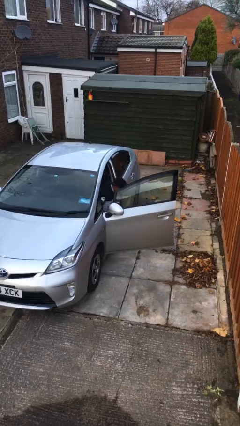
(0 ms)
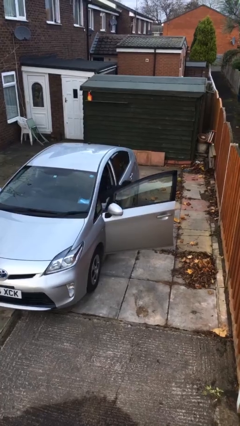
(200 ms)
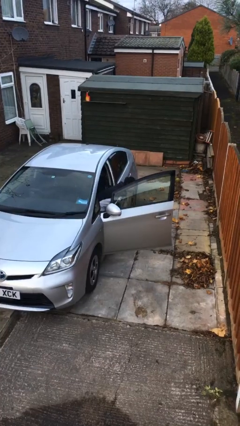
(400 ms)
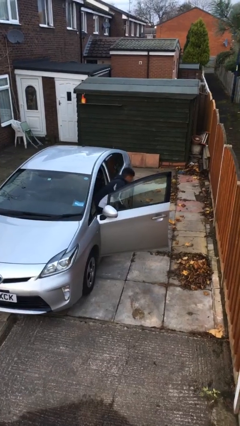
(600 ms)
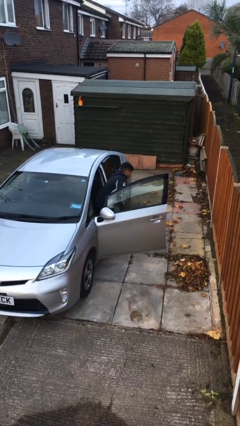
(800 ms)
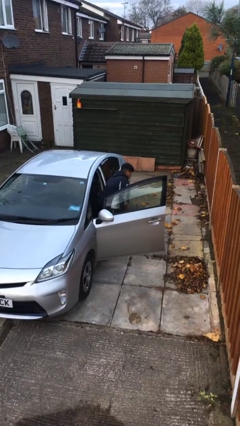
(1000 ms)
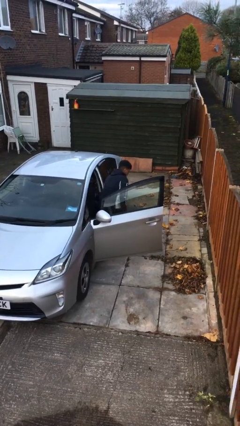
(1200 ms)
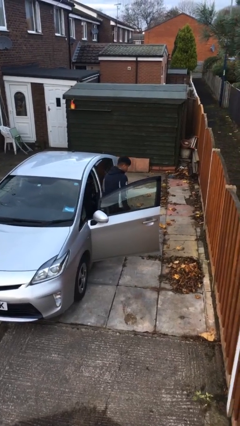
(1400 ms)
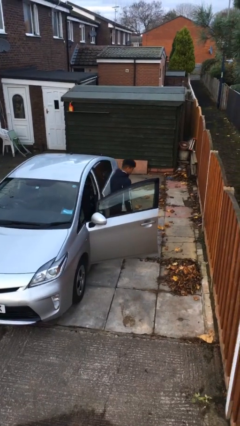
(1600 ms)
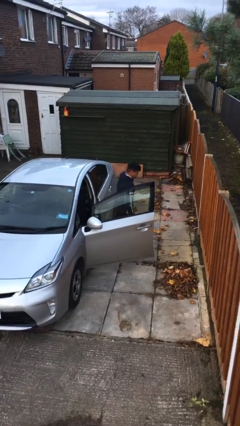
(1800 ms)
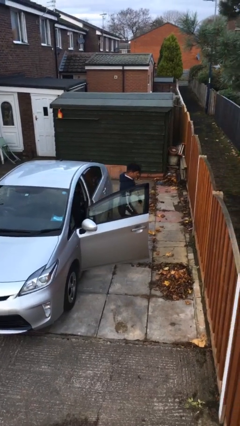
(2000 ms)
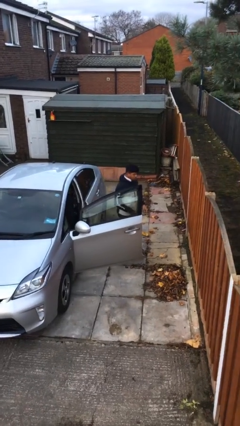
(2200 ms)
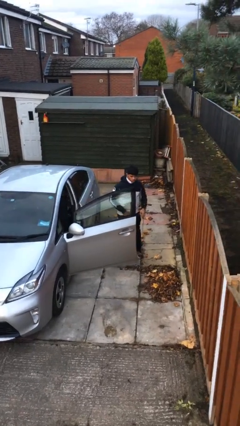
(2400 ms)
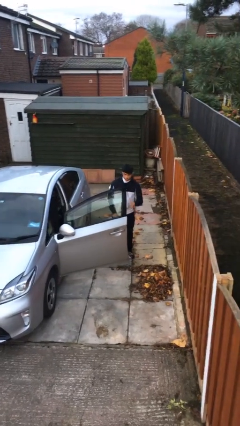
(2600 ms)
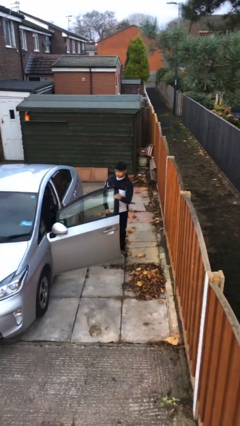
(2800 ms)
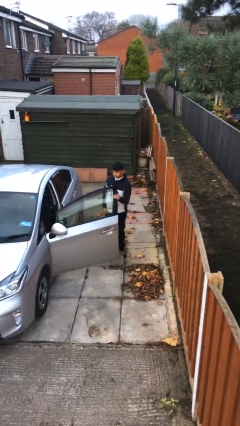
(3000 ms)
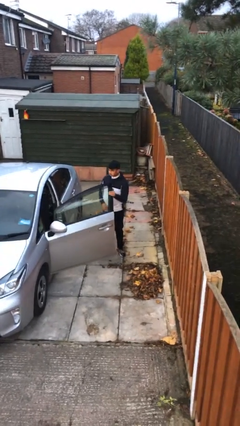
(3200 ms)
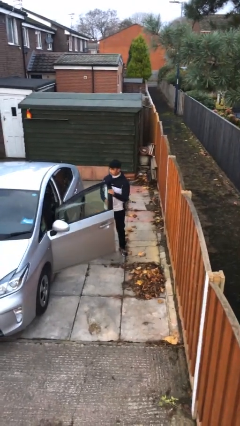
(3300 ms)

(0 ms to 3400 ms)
person exits car

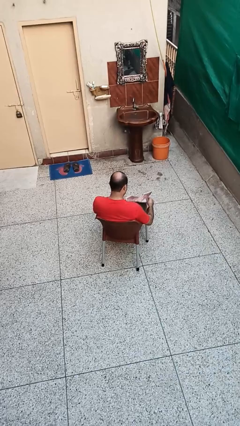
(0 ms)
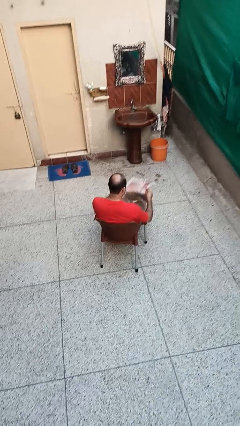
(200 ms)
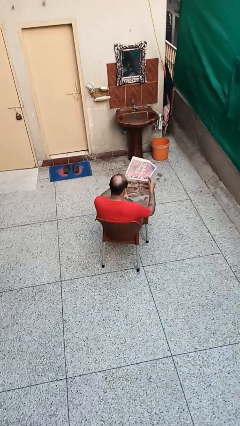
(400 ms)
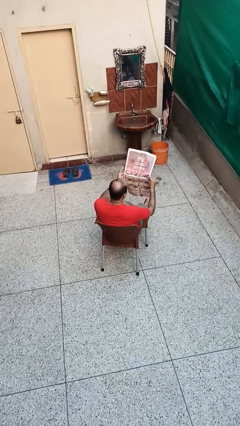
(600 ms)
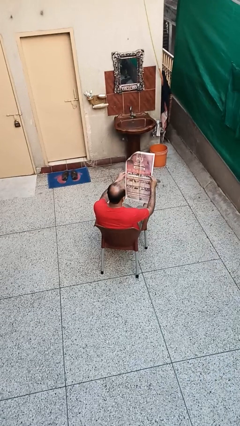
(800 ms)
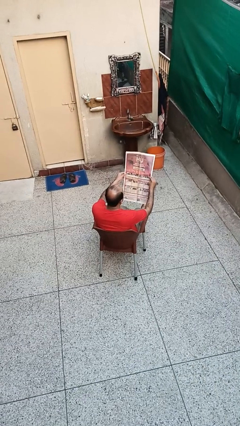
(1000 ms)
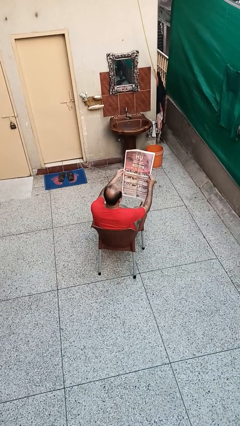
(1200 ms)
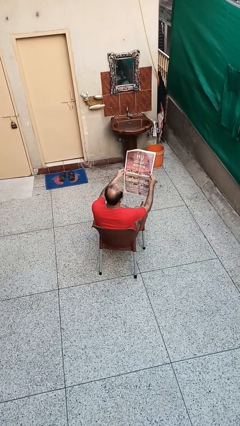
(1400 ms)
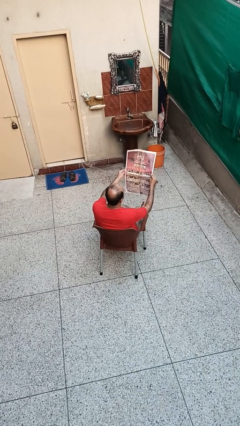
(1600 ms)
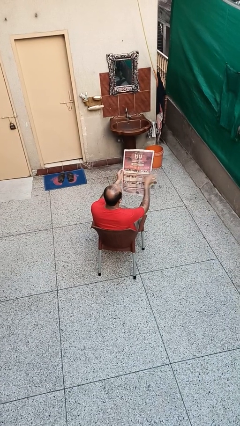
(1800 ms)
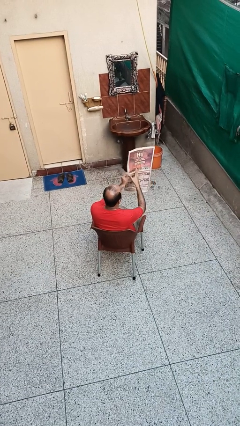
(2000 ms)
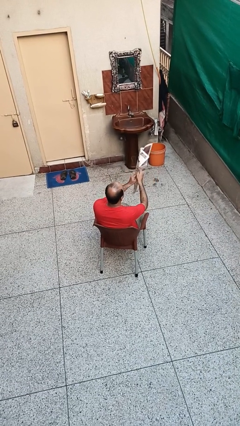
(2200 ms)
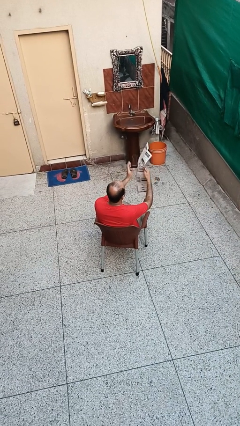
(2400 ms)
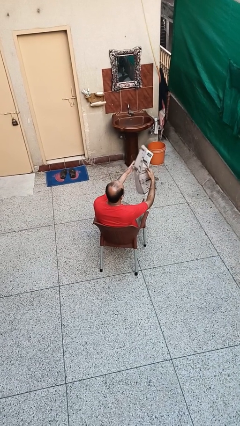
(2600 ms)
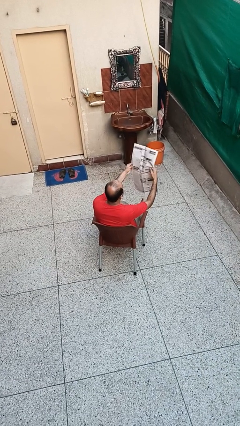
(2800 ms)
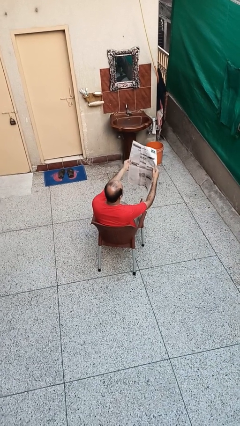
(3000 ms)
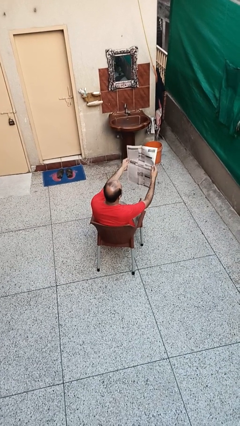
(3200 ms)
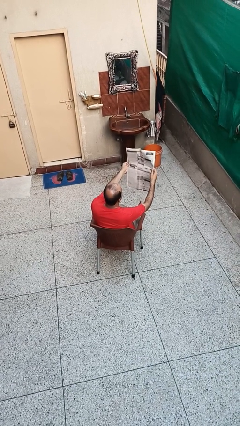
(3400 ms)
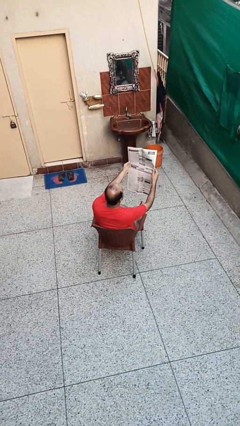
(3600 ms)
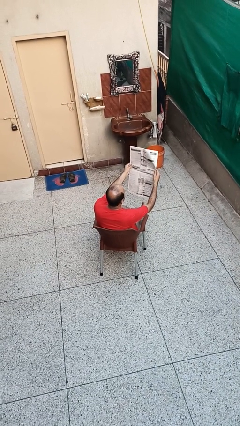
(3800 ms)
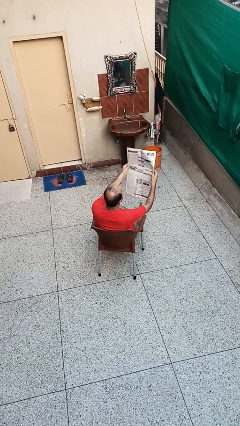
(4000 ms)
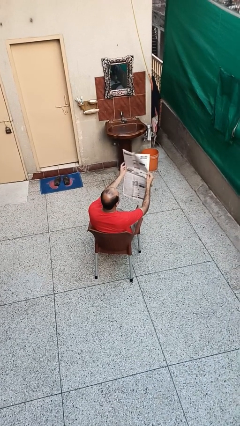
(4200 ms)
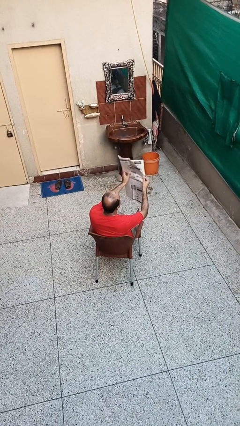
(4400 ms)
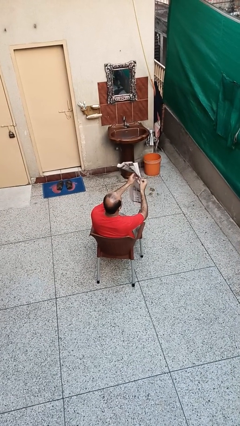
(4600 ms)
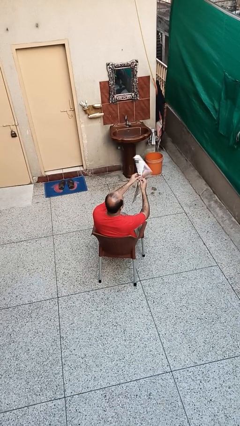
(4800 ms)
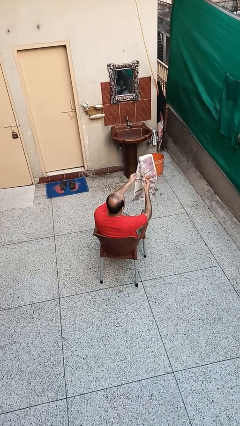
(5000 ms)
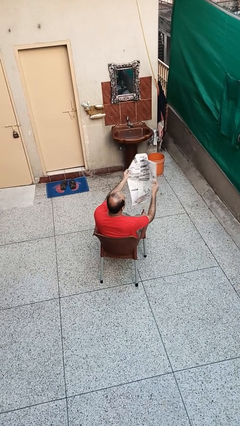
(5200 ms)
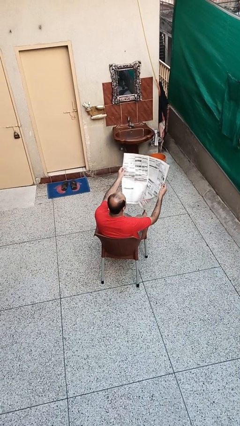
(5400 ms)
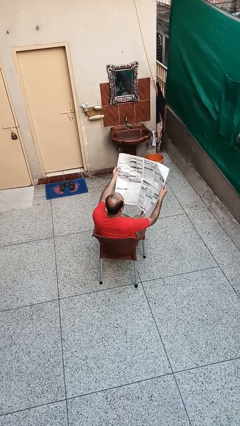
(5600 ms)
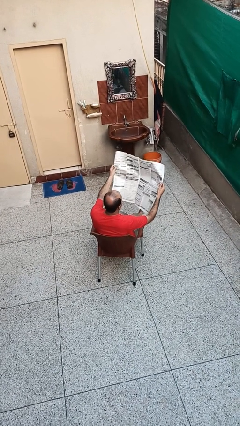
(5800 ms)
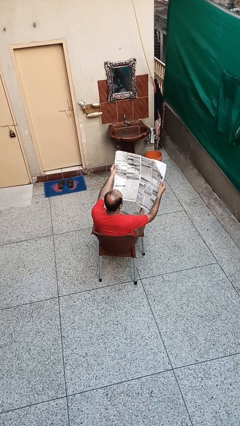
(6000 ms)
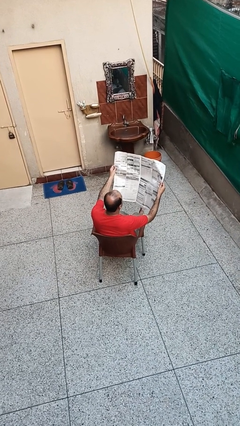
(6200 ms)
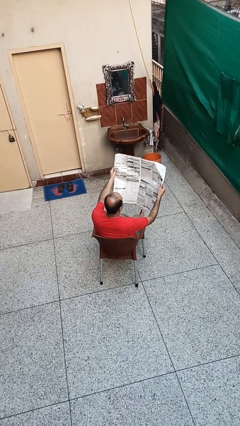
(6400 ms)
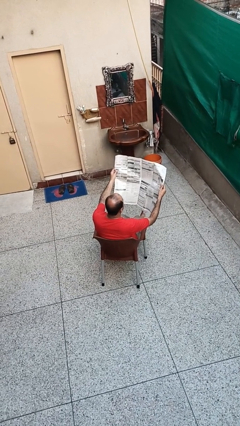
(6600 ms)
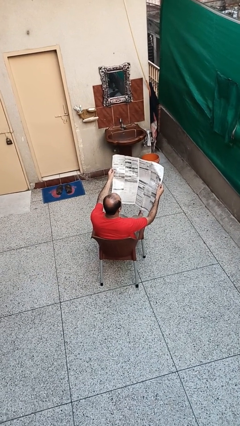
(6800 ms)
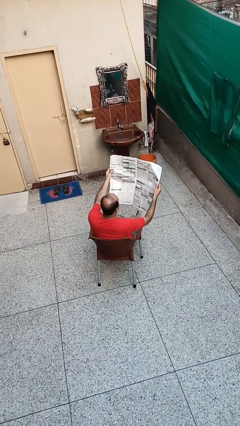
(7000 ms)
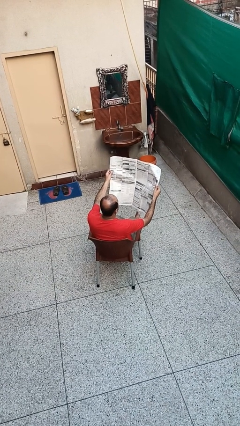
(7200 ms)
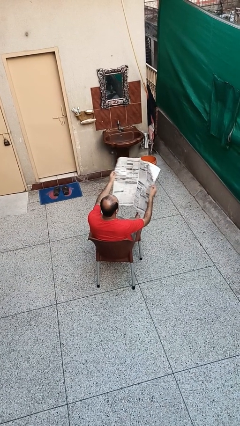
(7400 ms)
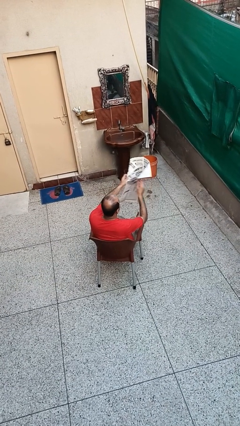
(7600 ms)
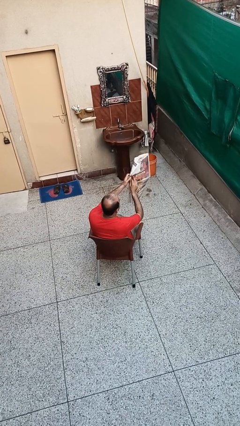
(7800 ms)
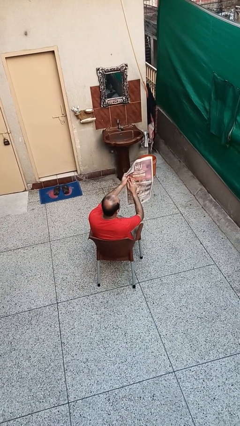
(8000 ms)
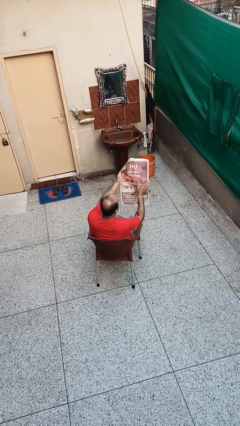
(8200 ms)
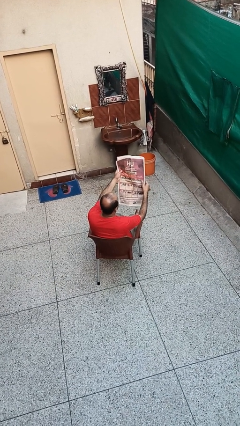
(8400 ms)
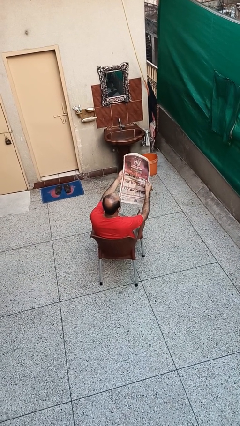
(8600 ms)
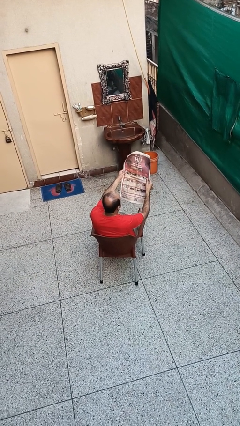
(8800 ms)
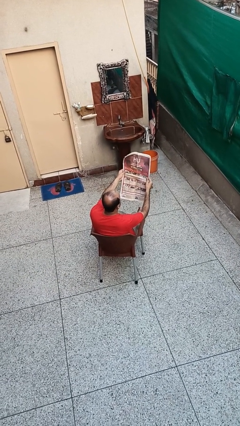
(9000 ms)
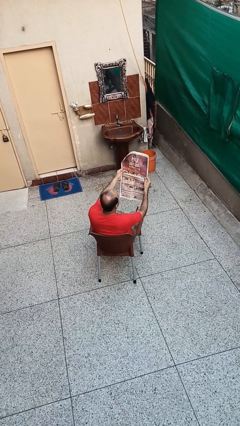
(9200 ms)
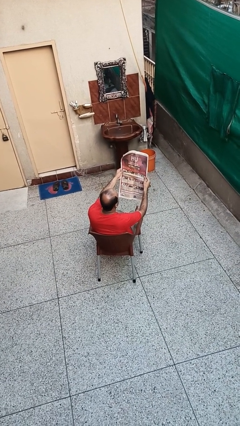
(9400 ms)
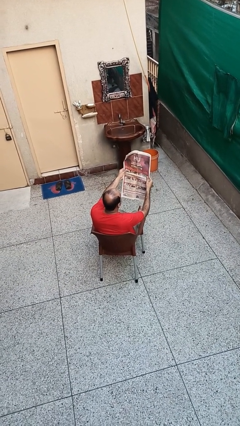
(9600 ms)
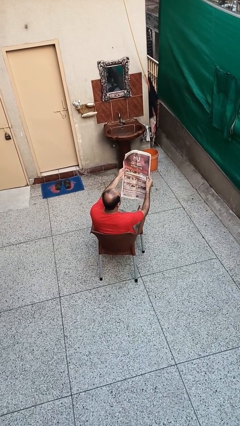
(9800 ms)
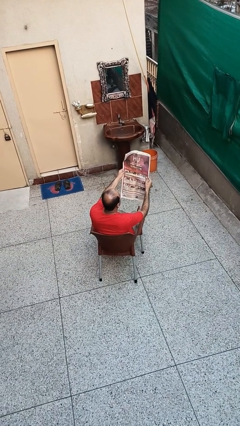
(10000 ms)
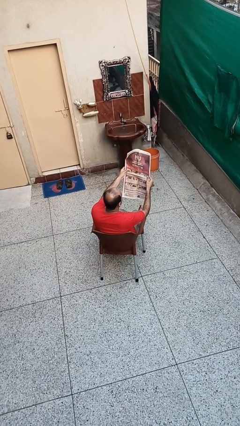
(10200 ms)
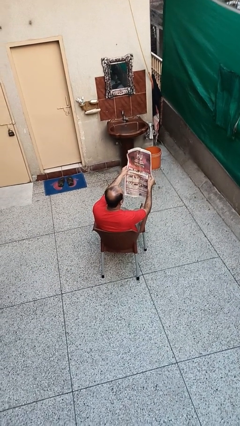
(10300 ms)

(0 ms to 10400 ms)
person reads newspaper

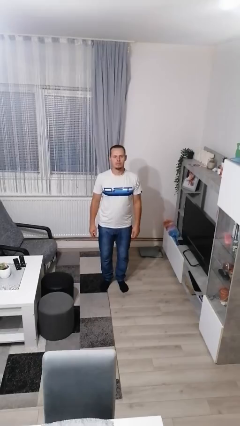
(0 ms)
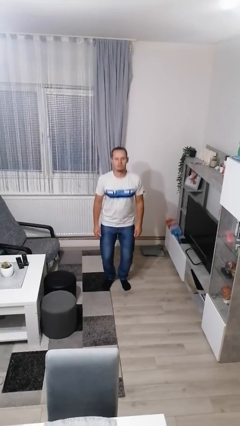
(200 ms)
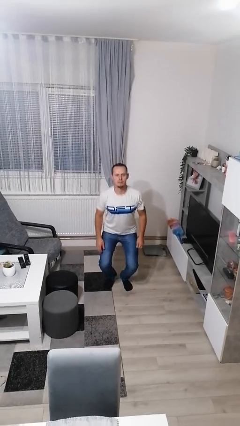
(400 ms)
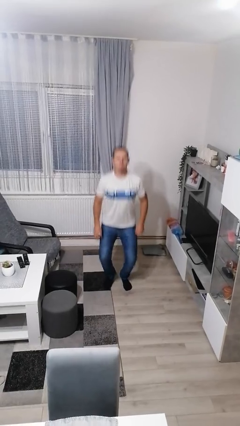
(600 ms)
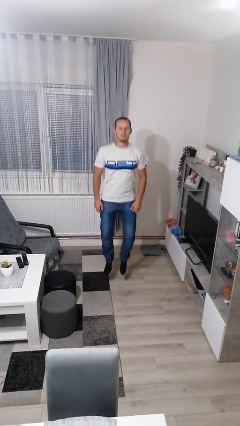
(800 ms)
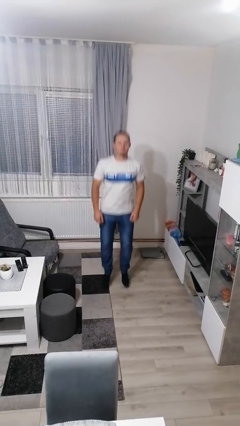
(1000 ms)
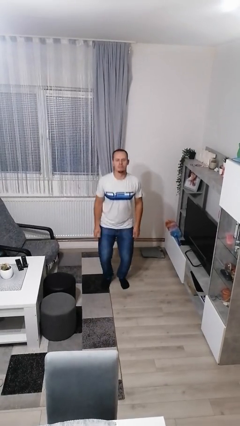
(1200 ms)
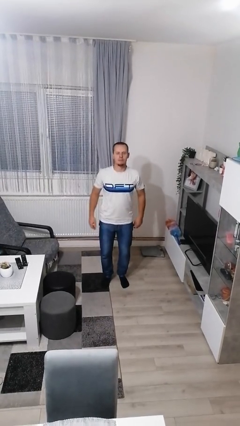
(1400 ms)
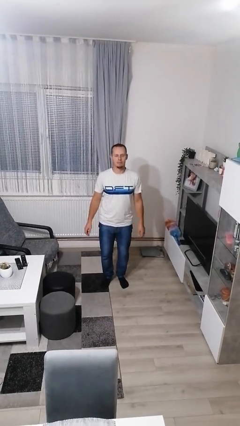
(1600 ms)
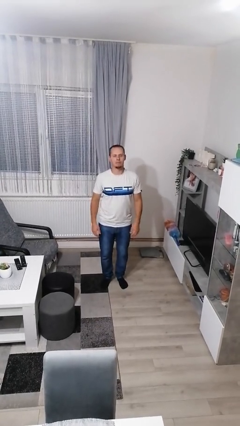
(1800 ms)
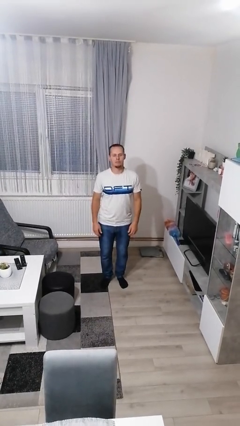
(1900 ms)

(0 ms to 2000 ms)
person jumps

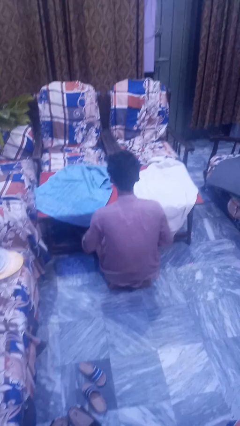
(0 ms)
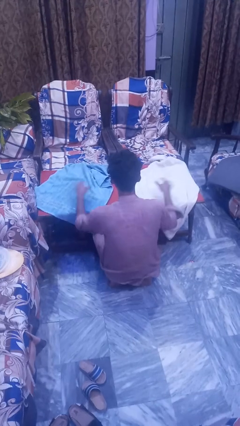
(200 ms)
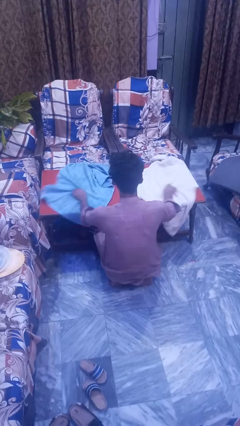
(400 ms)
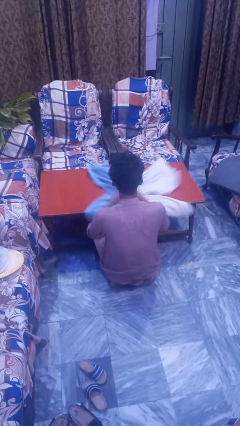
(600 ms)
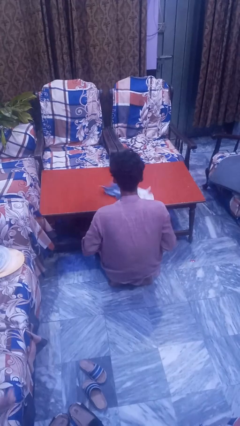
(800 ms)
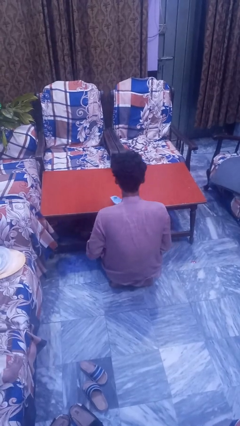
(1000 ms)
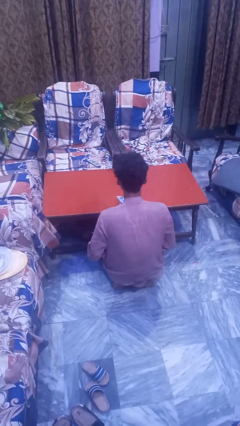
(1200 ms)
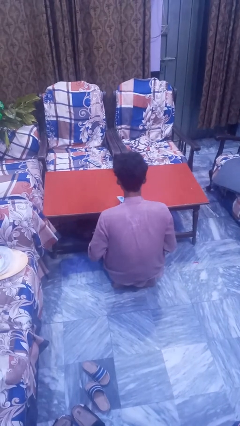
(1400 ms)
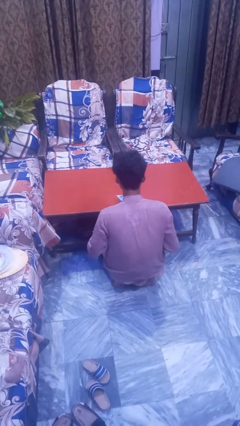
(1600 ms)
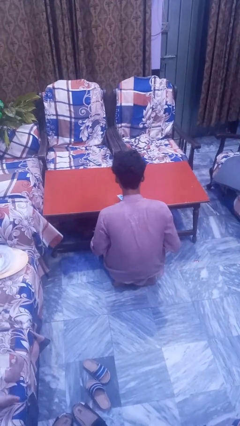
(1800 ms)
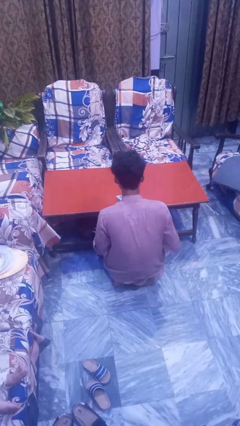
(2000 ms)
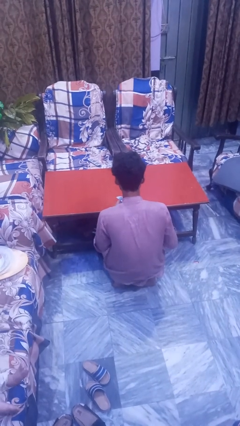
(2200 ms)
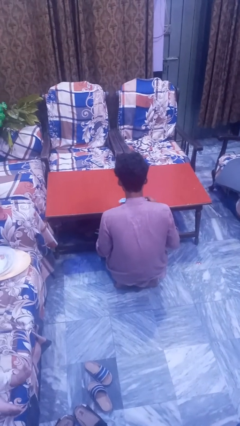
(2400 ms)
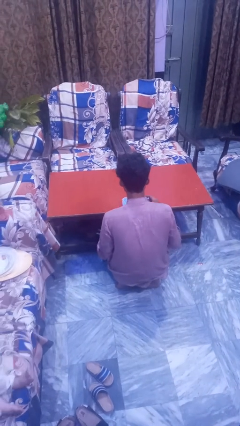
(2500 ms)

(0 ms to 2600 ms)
person folds tablecloth
